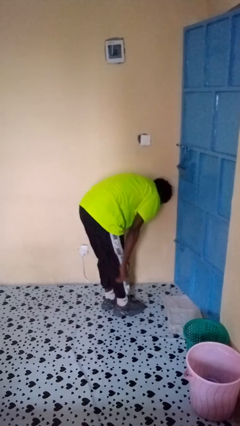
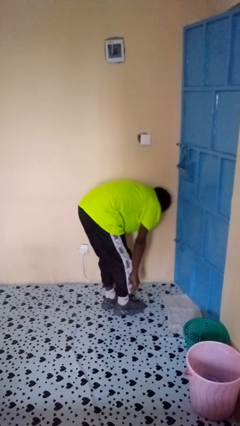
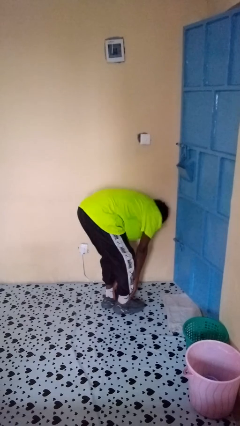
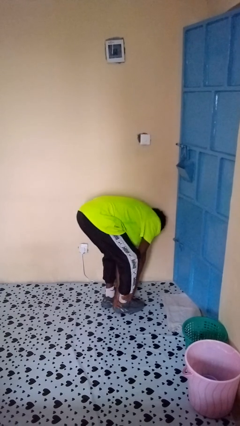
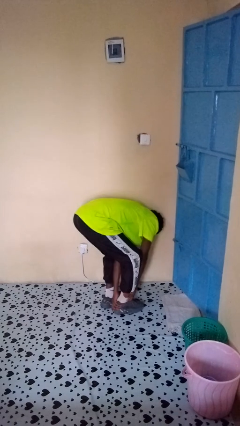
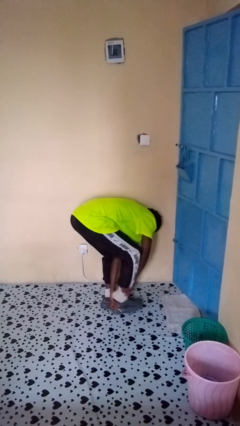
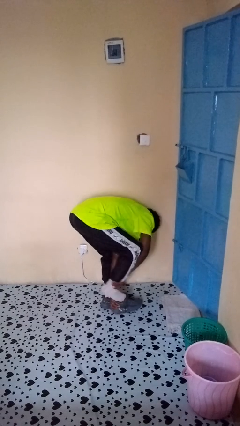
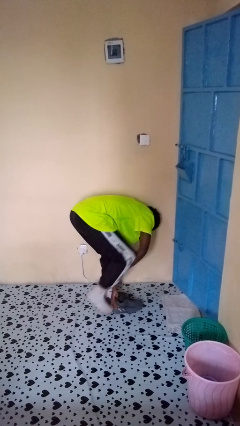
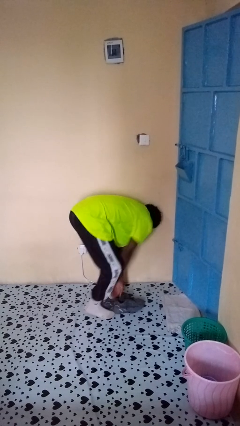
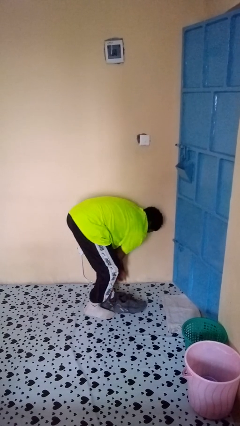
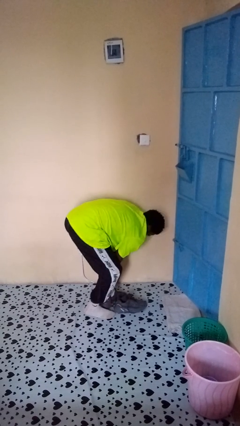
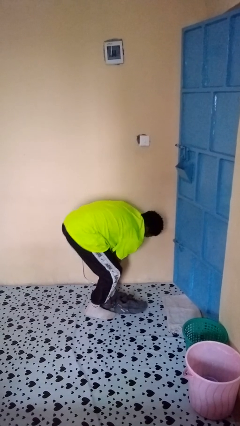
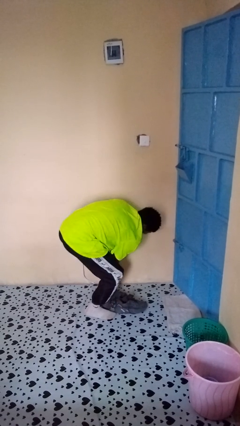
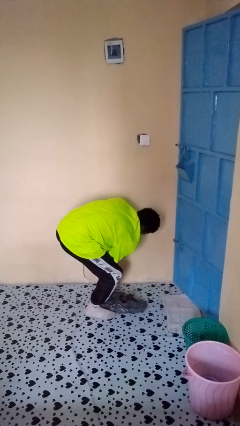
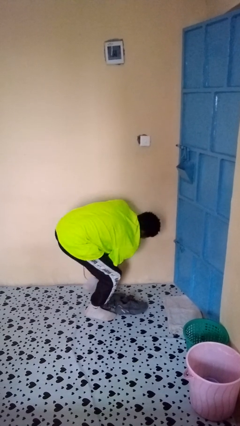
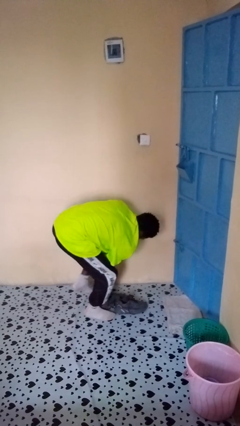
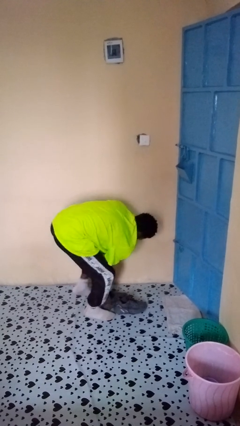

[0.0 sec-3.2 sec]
person takes off shoes

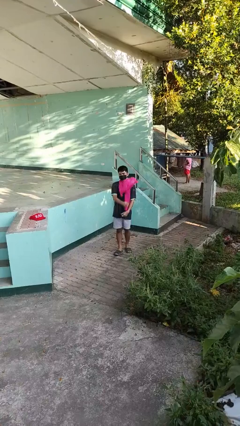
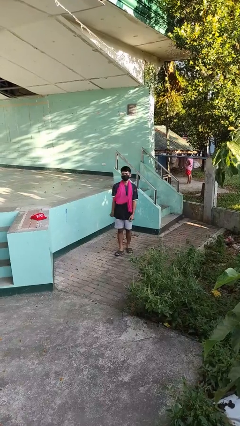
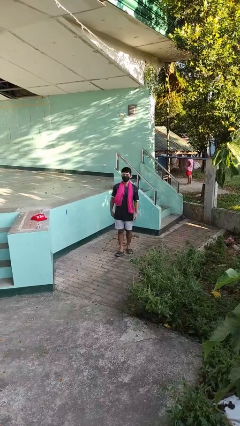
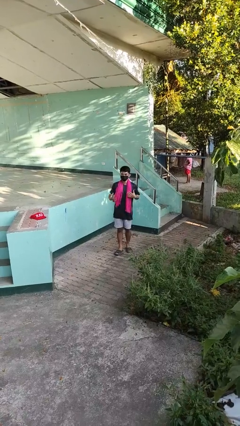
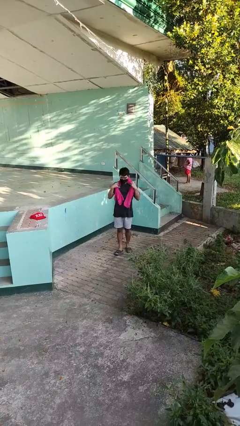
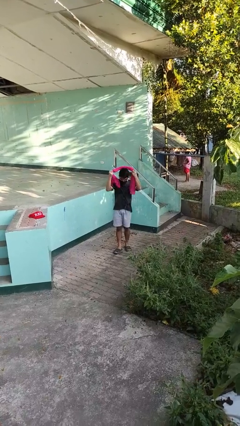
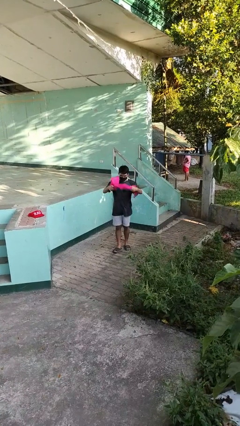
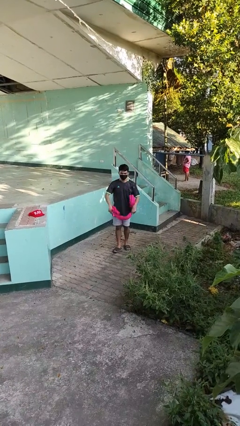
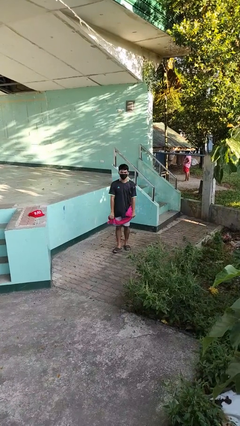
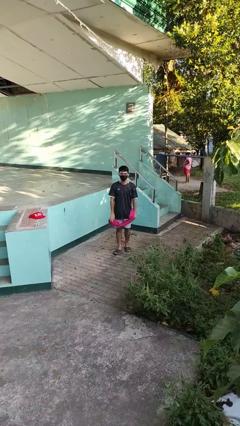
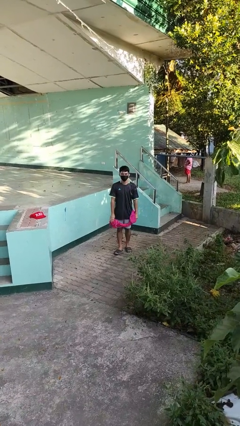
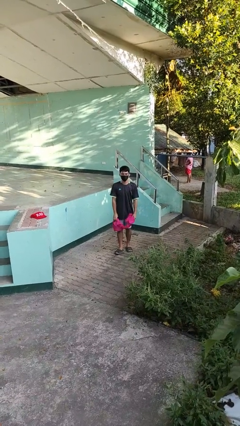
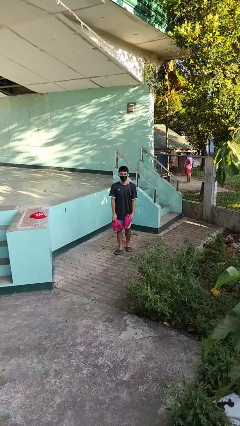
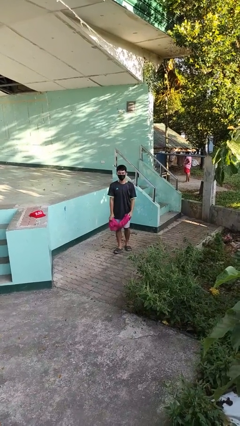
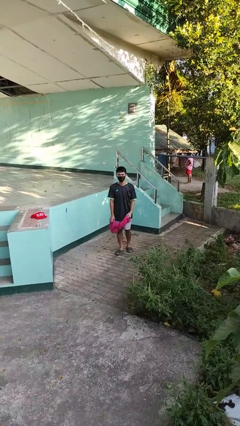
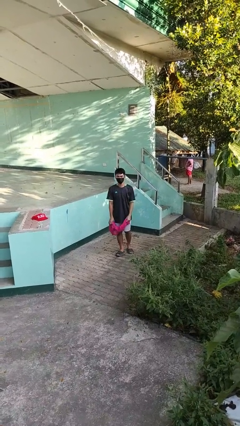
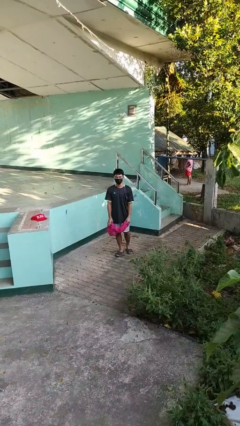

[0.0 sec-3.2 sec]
person takes off scarf

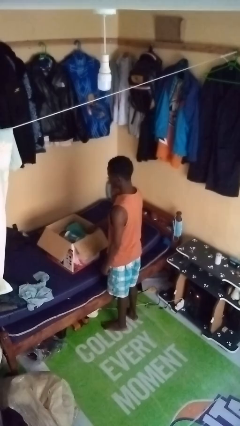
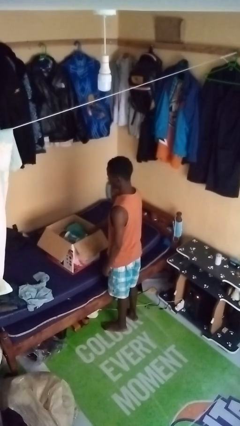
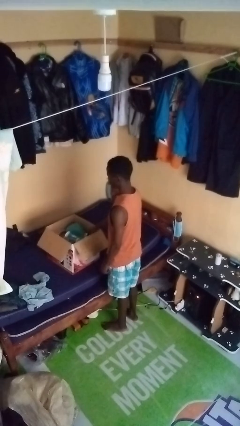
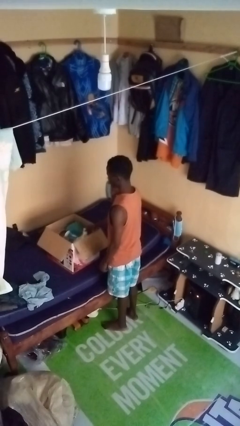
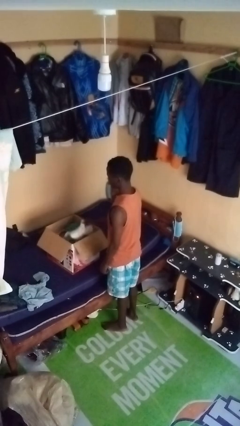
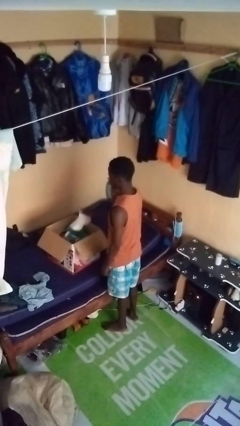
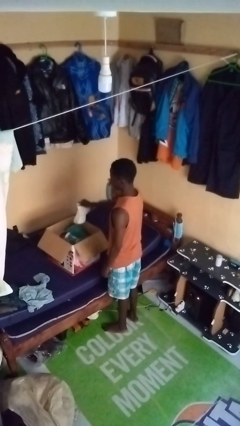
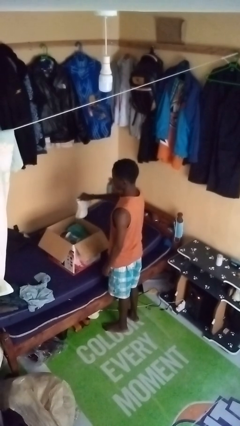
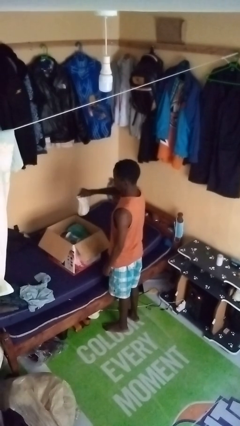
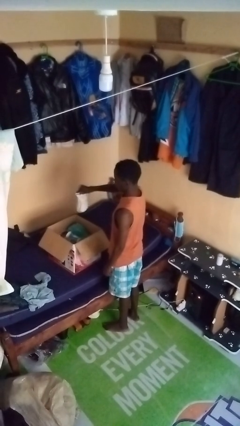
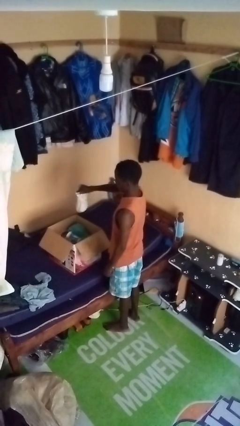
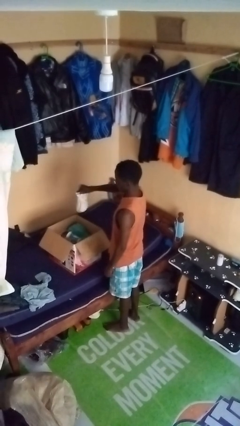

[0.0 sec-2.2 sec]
person takes object from box

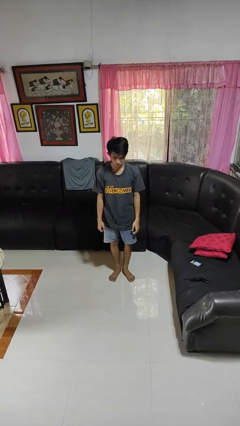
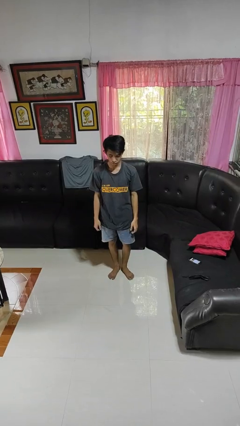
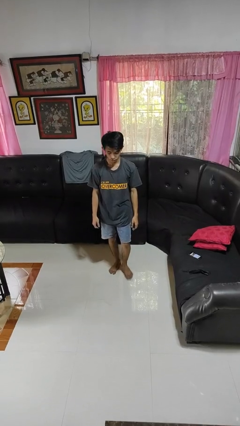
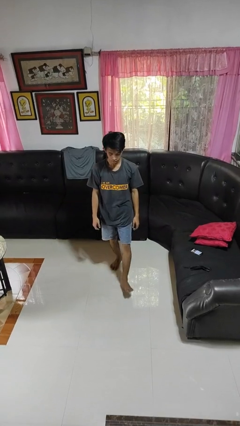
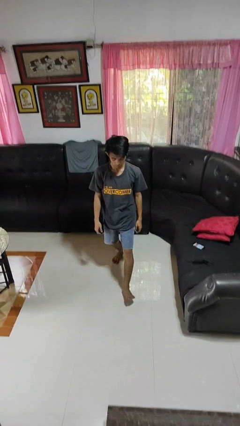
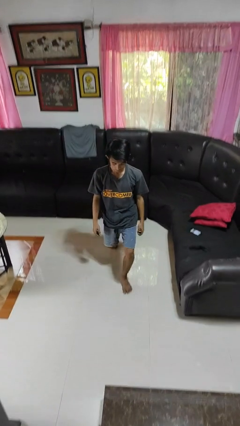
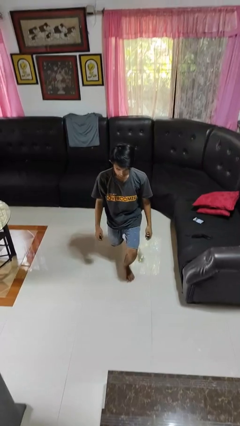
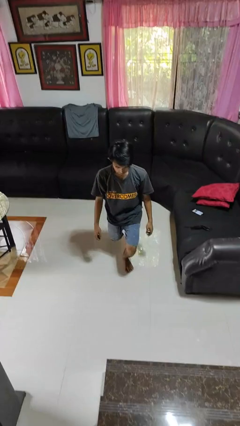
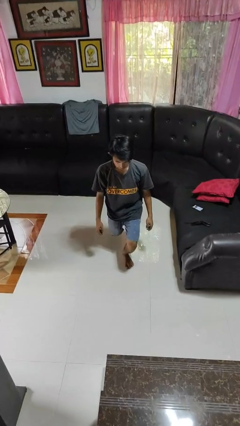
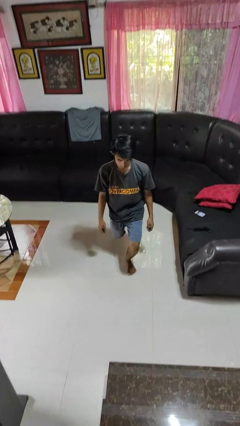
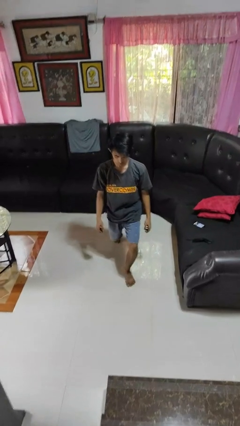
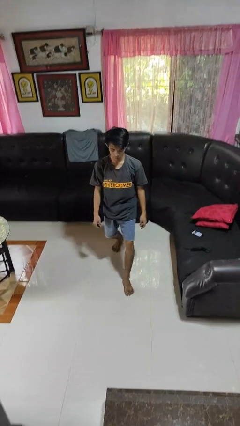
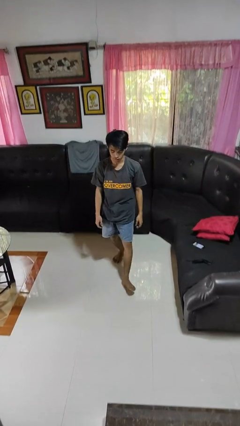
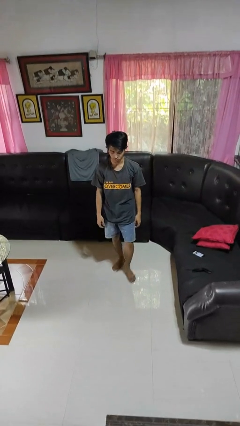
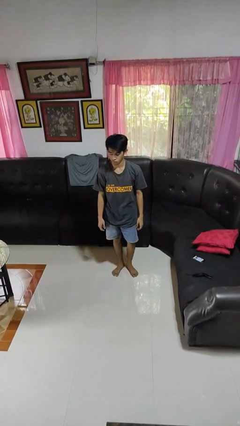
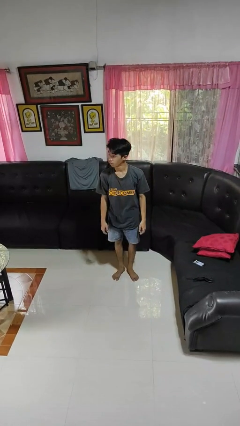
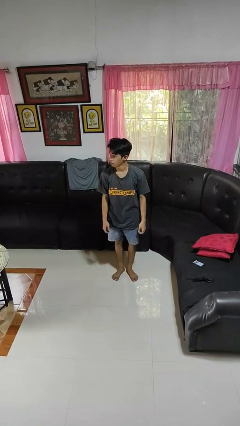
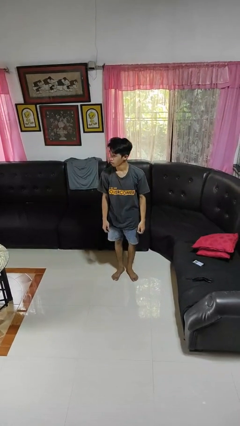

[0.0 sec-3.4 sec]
person exercises with lunges

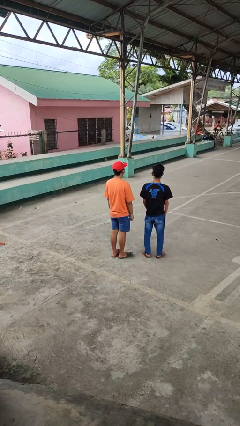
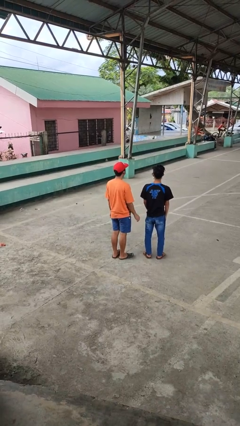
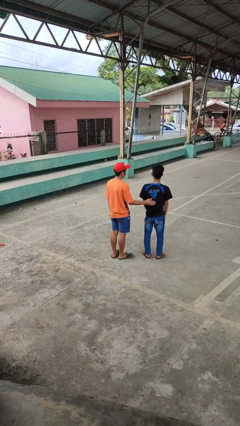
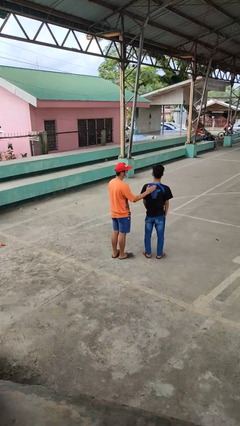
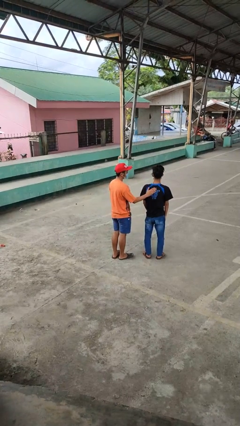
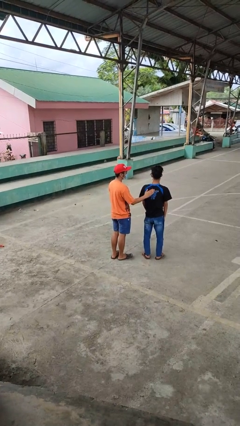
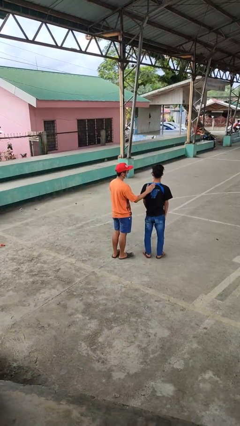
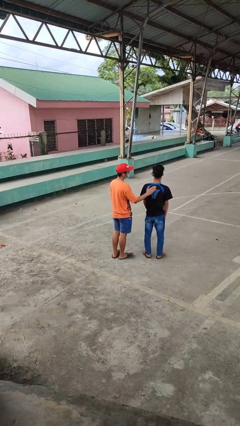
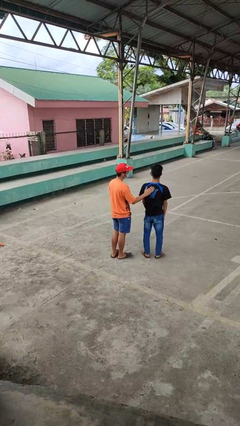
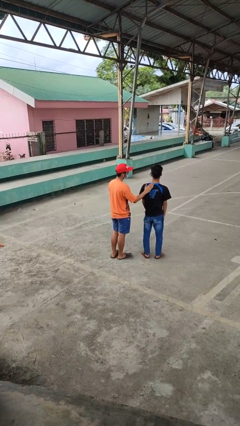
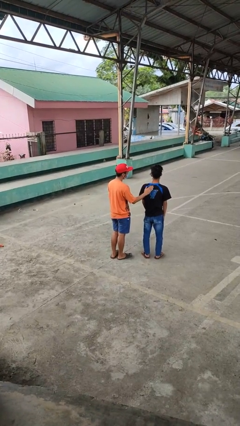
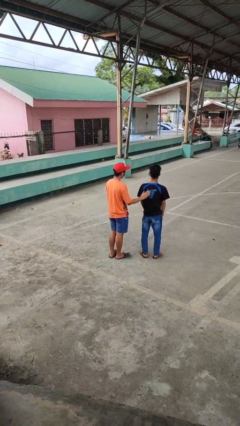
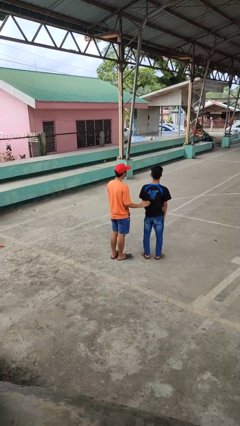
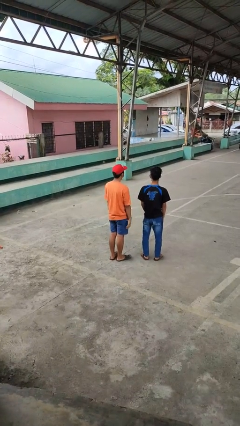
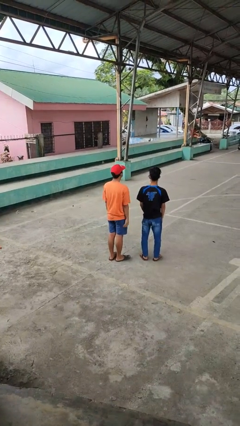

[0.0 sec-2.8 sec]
person touches back of person

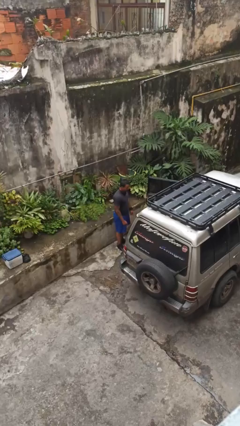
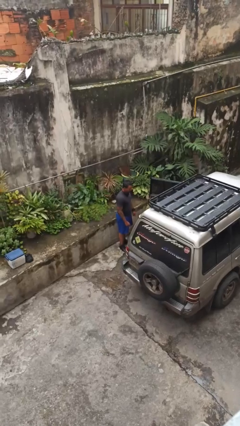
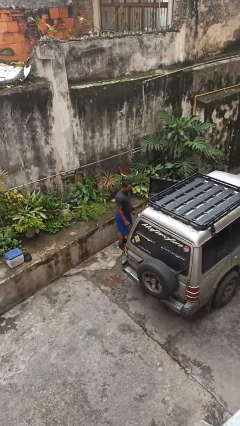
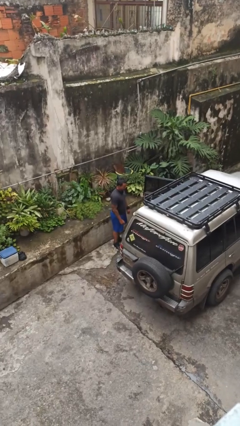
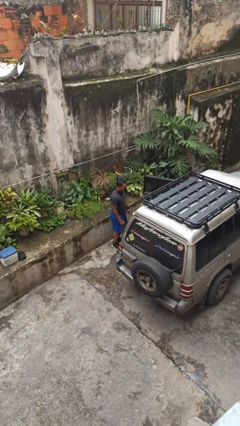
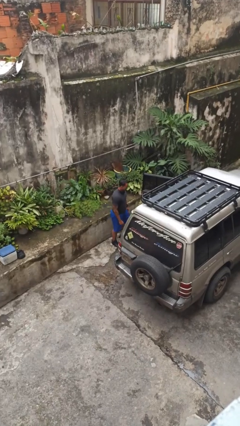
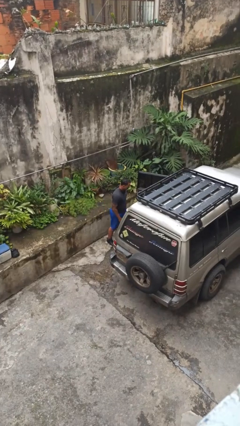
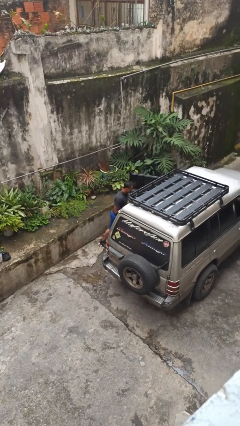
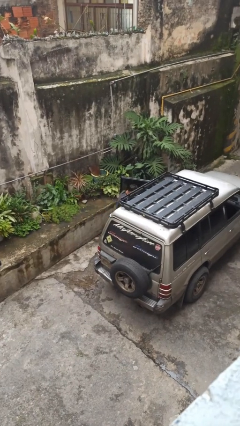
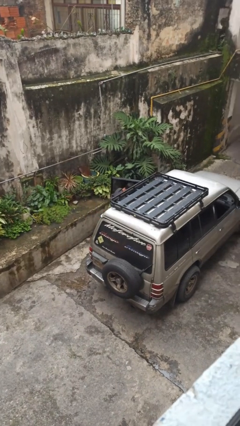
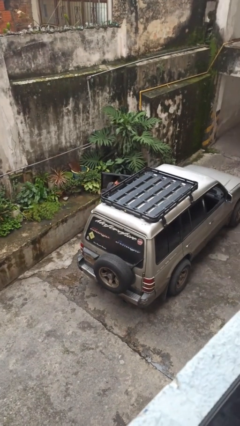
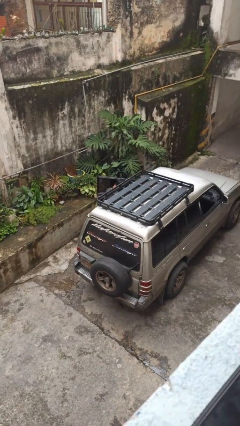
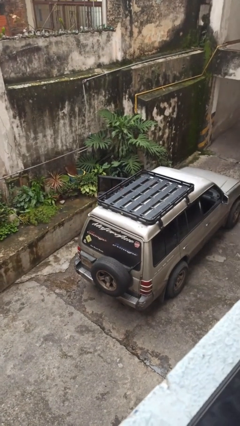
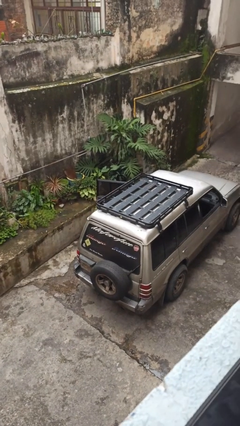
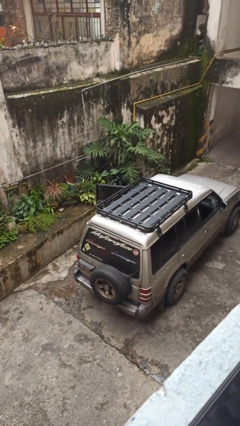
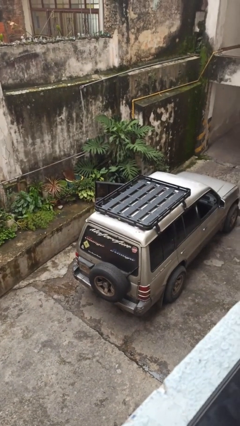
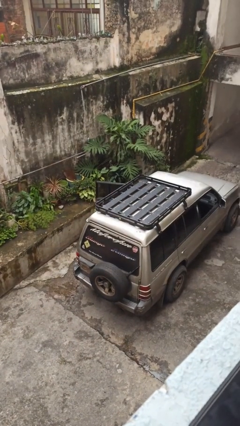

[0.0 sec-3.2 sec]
person enters car
